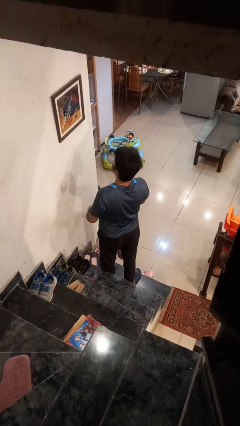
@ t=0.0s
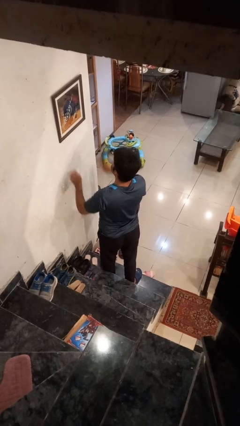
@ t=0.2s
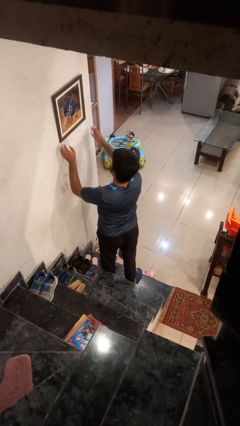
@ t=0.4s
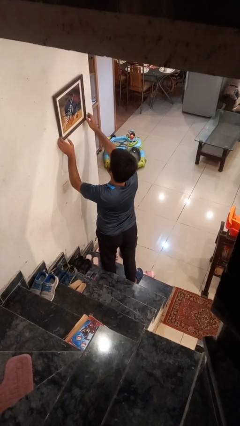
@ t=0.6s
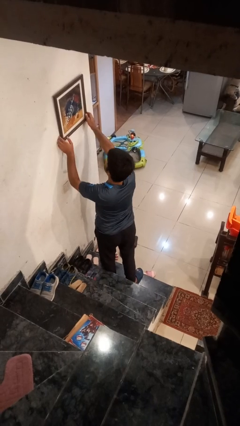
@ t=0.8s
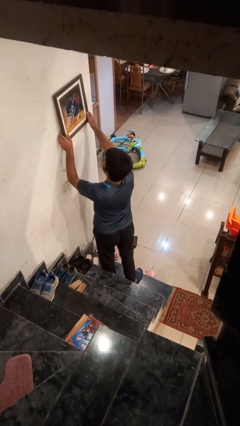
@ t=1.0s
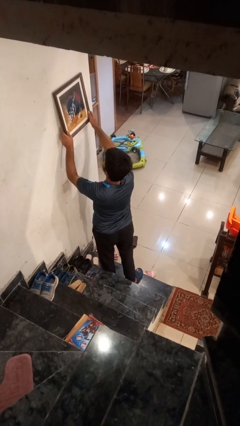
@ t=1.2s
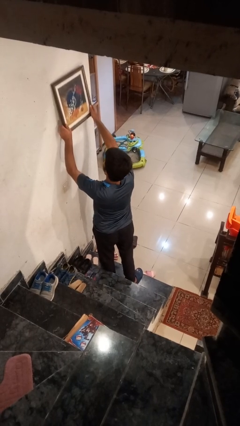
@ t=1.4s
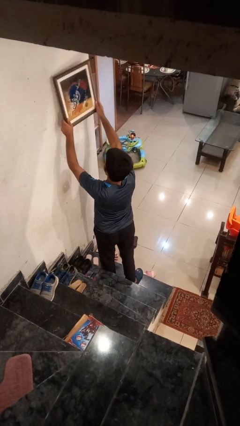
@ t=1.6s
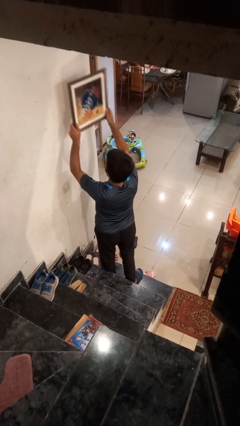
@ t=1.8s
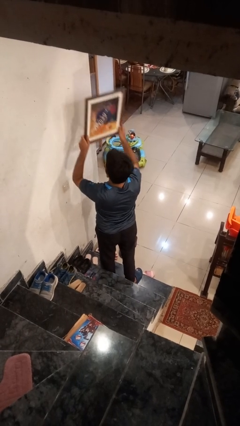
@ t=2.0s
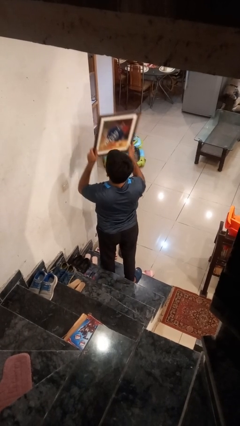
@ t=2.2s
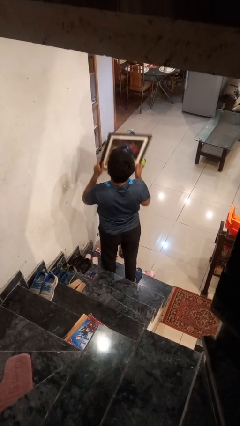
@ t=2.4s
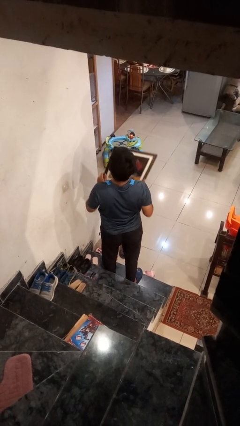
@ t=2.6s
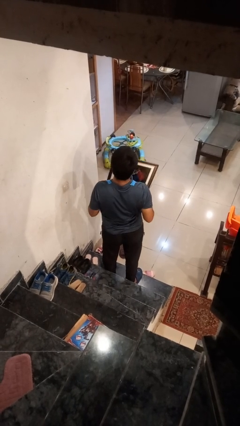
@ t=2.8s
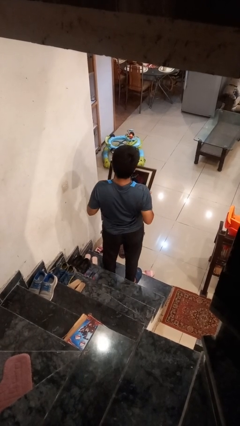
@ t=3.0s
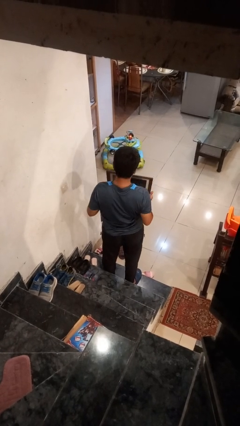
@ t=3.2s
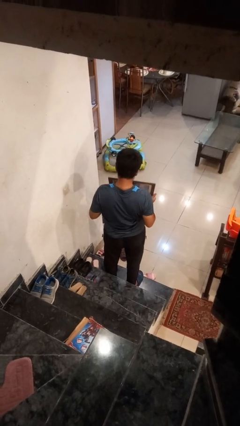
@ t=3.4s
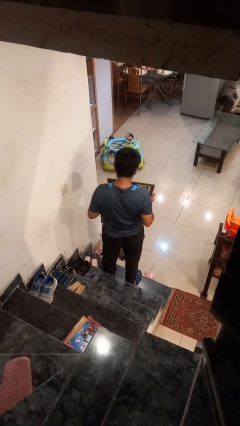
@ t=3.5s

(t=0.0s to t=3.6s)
person takes down picture frame

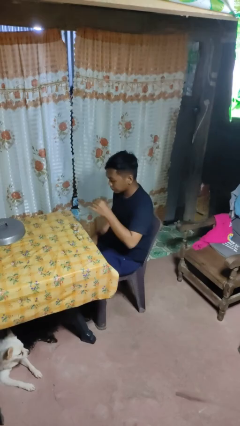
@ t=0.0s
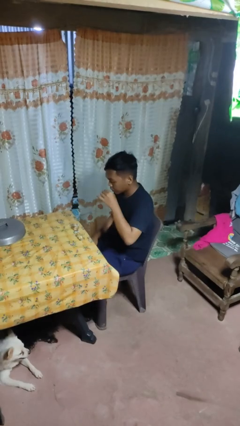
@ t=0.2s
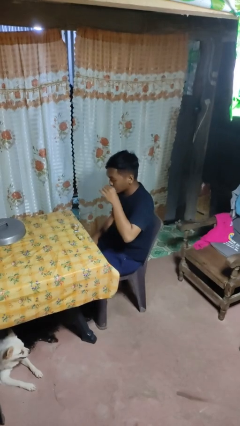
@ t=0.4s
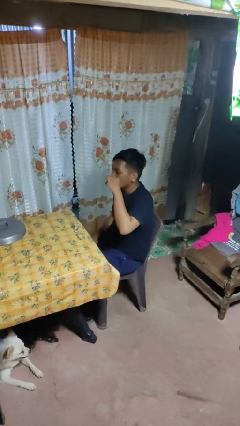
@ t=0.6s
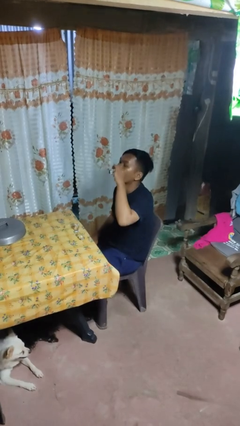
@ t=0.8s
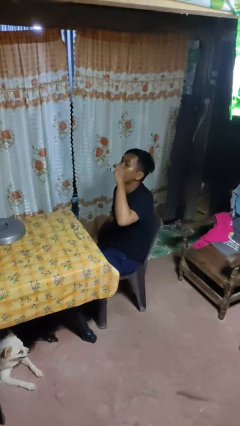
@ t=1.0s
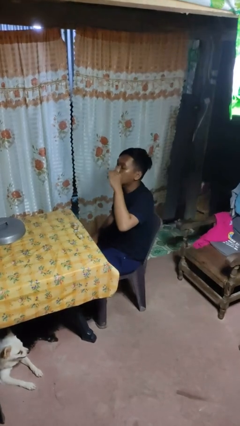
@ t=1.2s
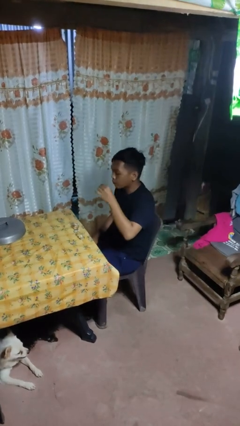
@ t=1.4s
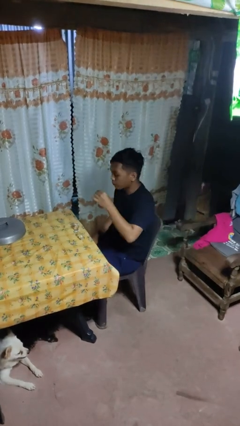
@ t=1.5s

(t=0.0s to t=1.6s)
person drinks from shotglass

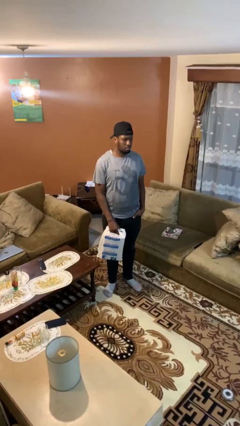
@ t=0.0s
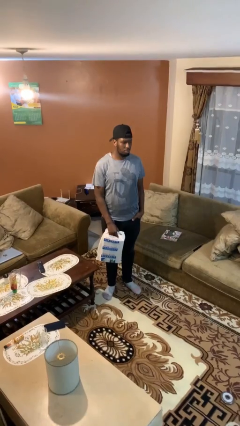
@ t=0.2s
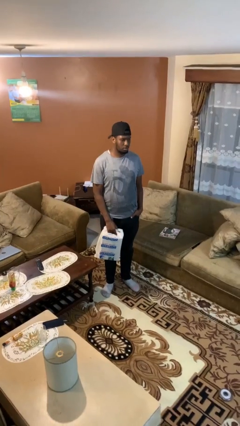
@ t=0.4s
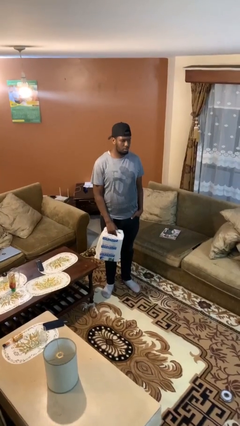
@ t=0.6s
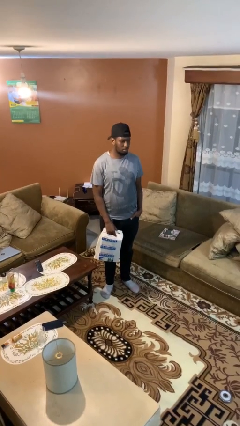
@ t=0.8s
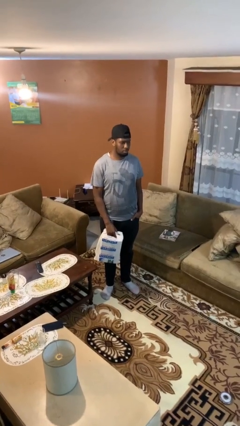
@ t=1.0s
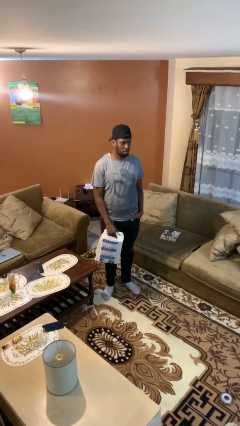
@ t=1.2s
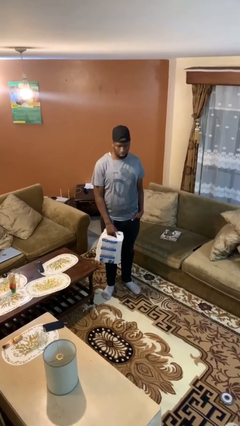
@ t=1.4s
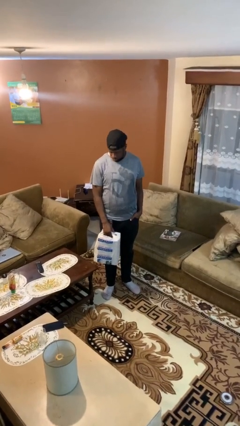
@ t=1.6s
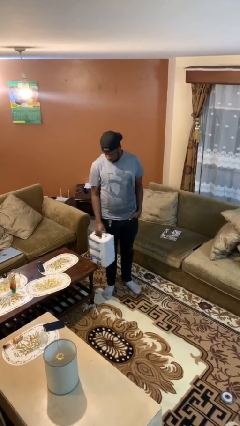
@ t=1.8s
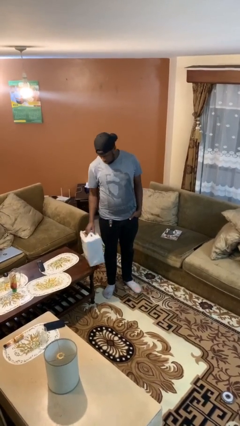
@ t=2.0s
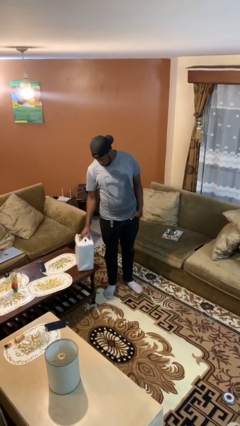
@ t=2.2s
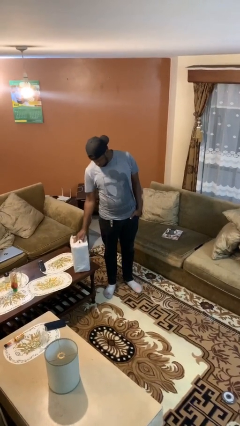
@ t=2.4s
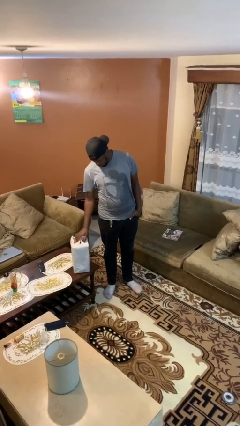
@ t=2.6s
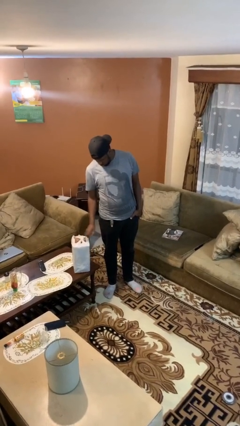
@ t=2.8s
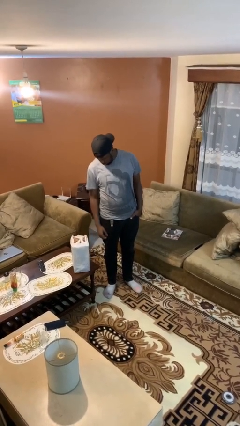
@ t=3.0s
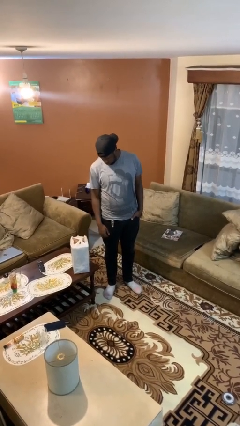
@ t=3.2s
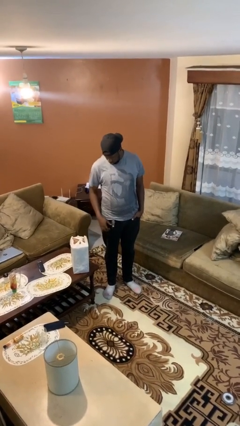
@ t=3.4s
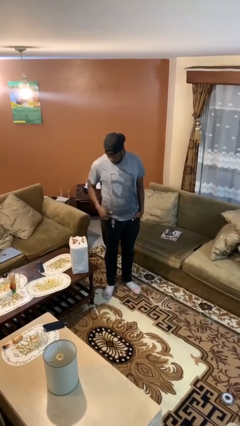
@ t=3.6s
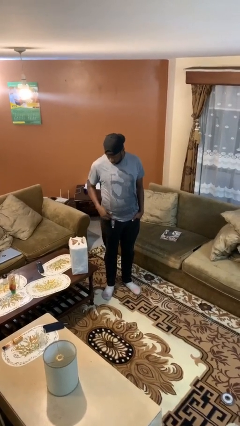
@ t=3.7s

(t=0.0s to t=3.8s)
person puts down object on table

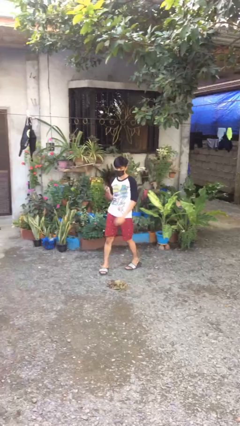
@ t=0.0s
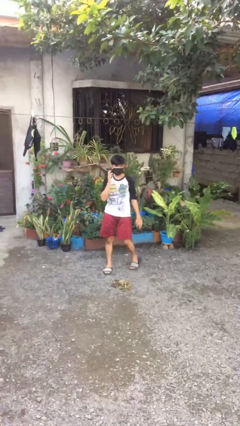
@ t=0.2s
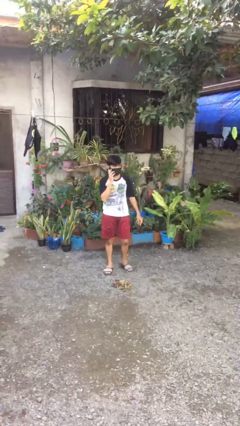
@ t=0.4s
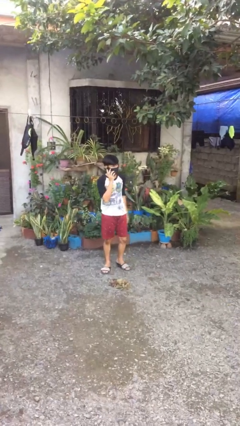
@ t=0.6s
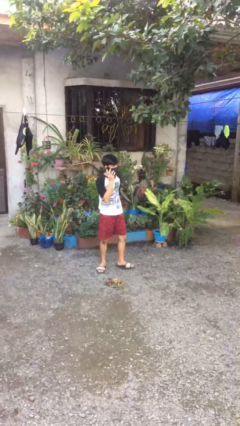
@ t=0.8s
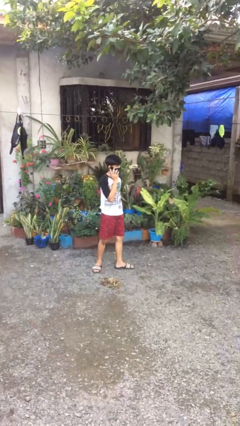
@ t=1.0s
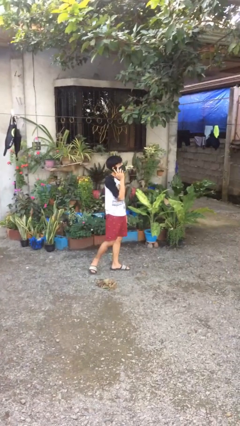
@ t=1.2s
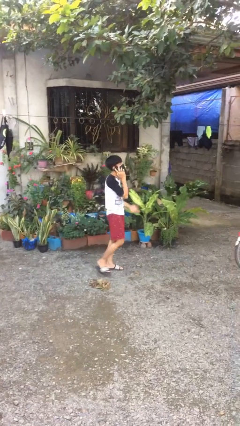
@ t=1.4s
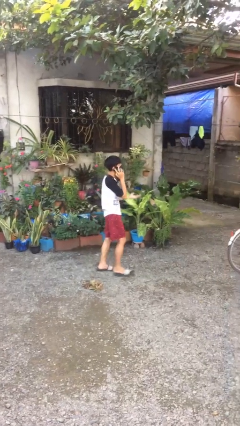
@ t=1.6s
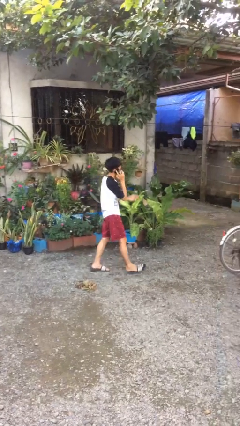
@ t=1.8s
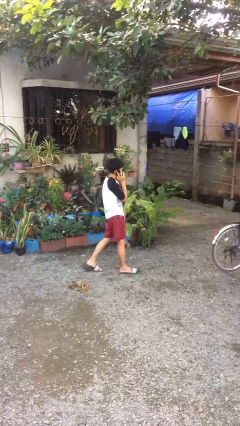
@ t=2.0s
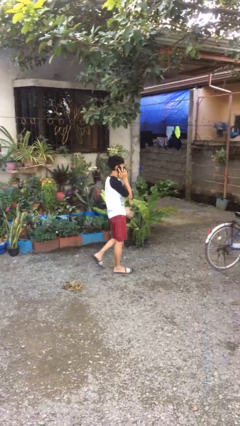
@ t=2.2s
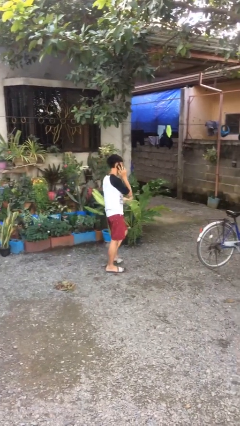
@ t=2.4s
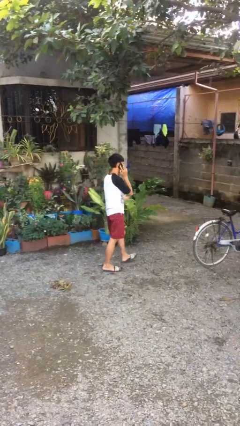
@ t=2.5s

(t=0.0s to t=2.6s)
person talks on phone

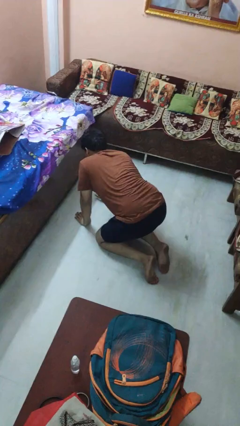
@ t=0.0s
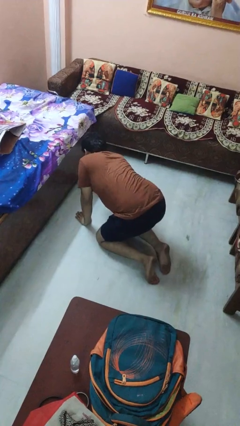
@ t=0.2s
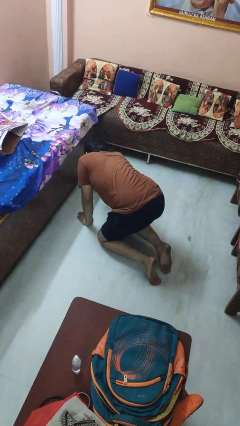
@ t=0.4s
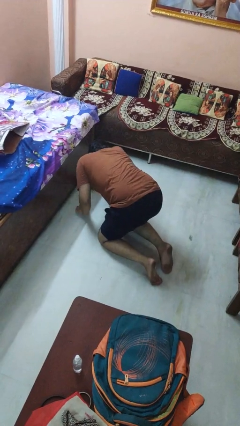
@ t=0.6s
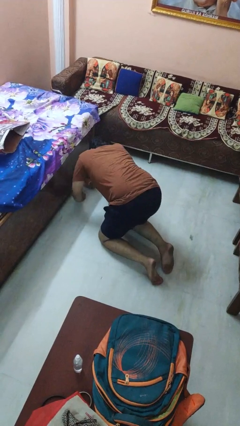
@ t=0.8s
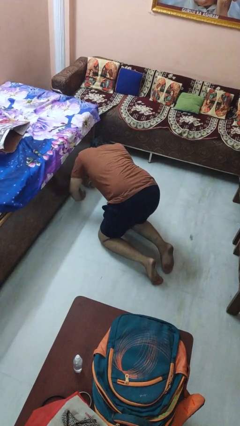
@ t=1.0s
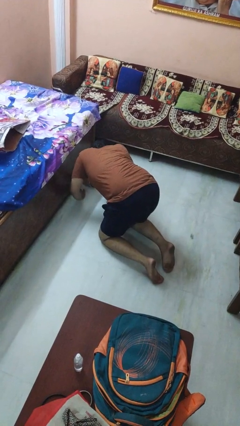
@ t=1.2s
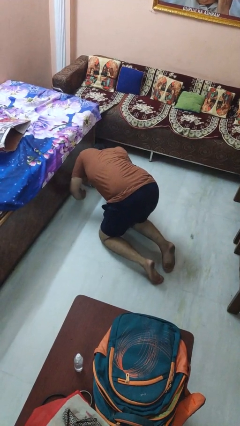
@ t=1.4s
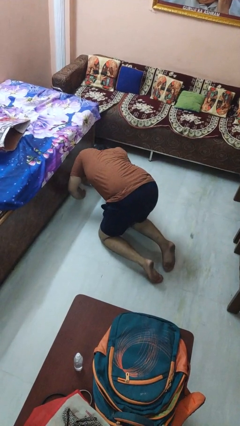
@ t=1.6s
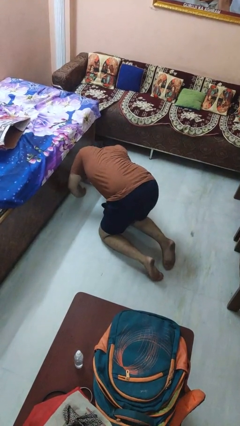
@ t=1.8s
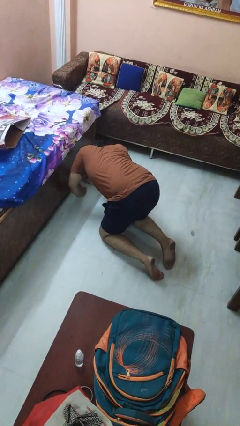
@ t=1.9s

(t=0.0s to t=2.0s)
person searches under bed

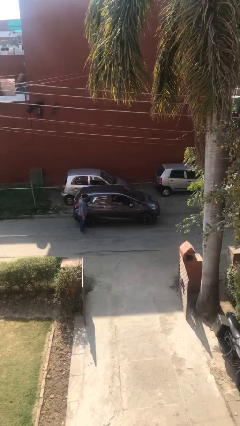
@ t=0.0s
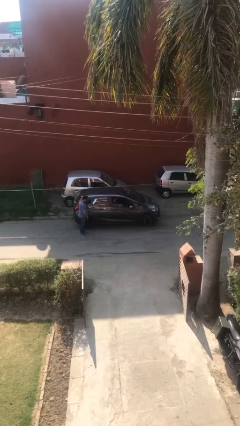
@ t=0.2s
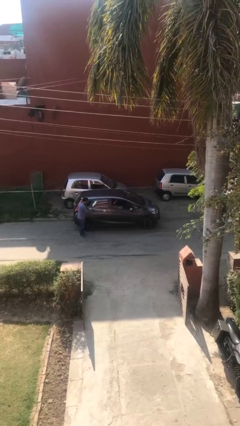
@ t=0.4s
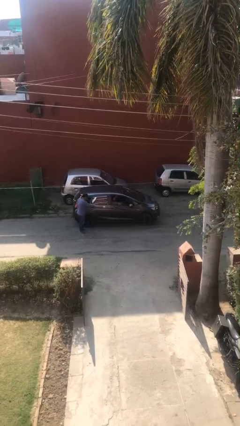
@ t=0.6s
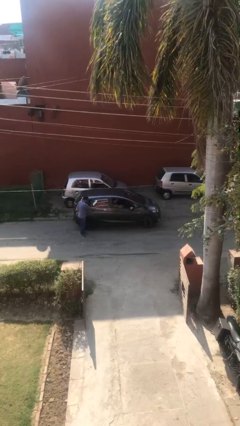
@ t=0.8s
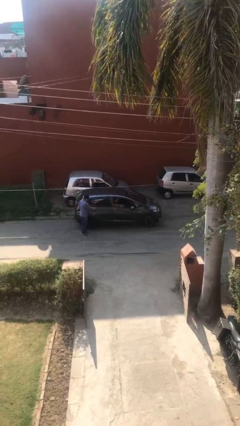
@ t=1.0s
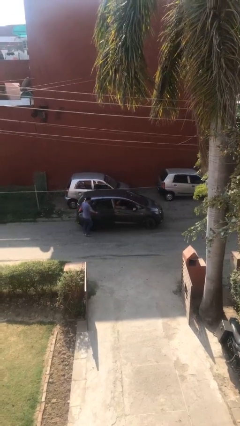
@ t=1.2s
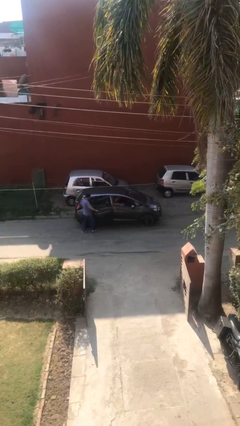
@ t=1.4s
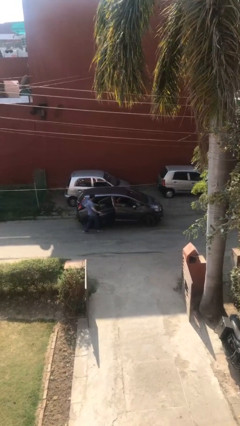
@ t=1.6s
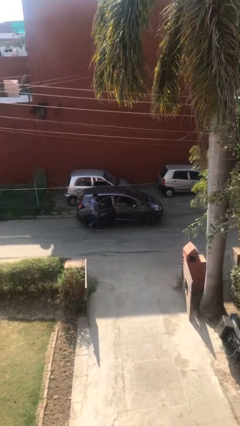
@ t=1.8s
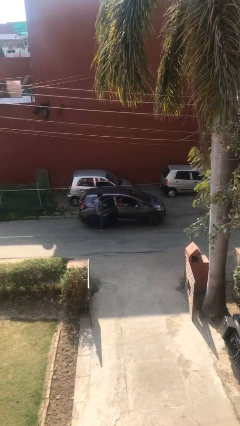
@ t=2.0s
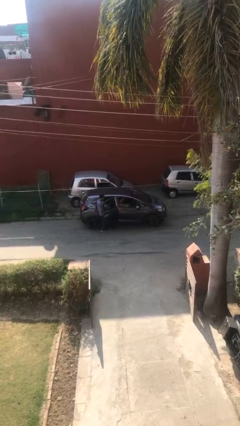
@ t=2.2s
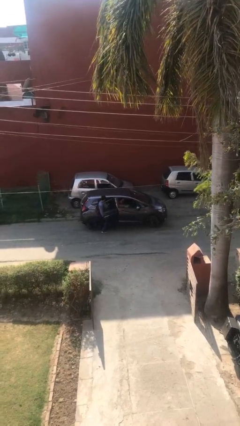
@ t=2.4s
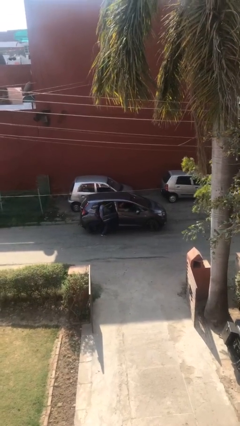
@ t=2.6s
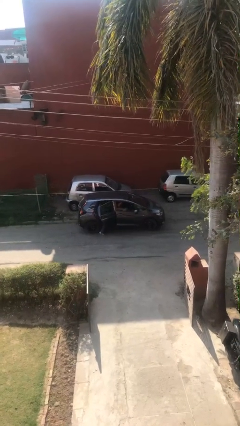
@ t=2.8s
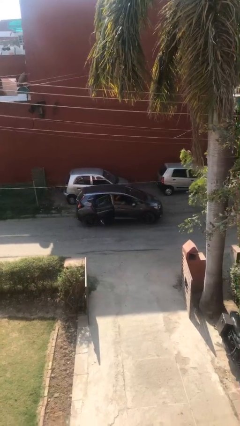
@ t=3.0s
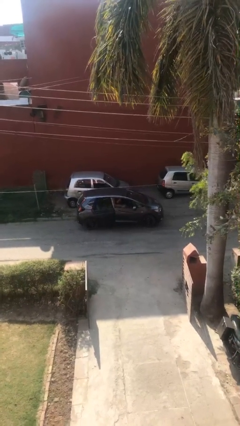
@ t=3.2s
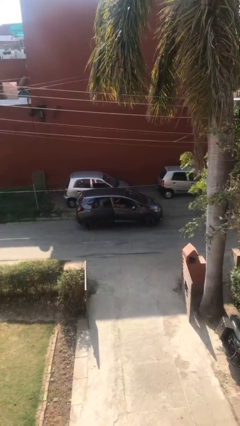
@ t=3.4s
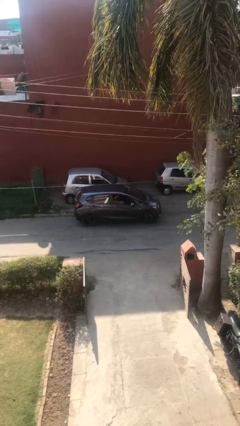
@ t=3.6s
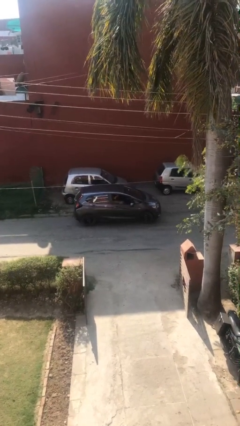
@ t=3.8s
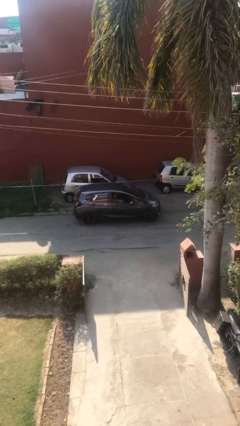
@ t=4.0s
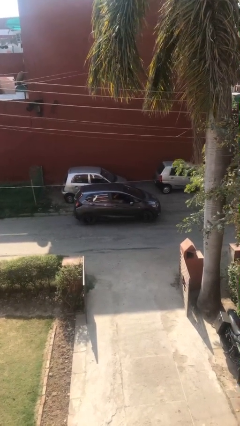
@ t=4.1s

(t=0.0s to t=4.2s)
car picks up person
